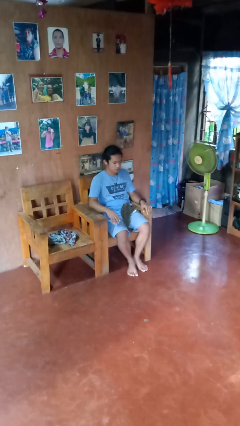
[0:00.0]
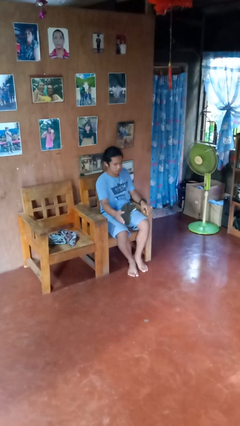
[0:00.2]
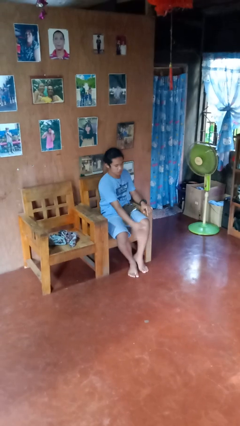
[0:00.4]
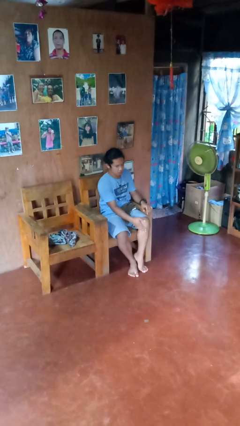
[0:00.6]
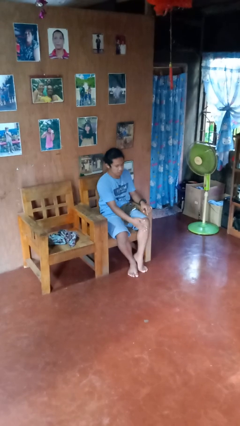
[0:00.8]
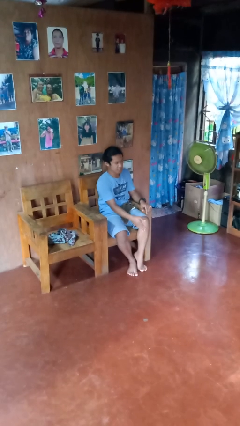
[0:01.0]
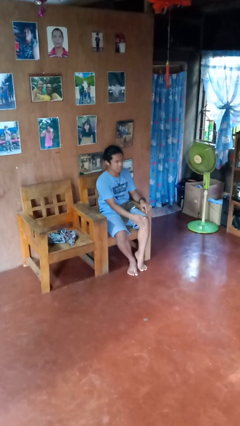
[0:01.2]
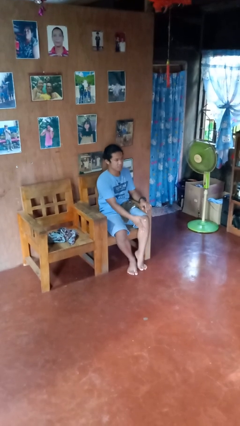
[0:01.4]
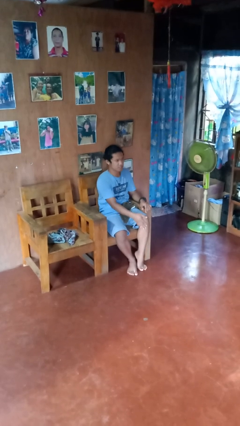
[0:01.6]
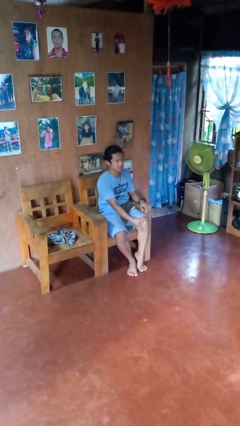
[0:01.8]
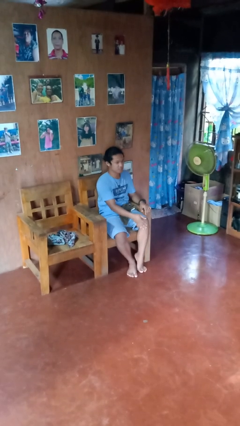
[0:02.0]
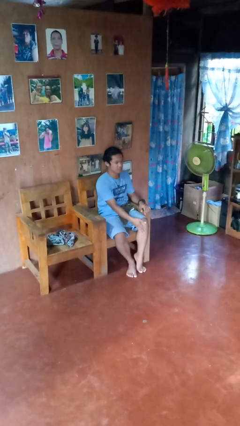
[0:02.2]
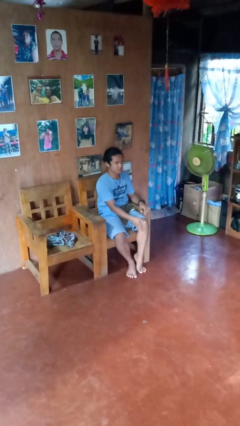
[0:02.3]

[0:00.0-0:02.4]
person swats bug

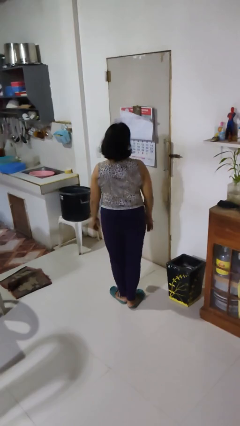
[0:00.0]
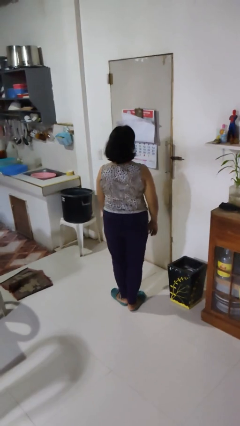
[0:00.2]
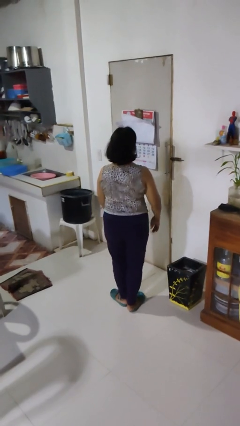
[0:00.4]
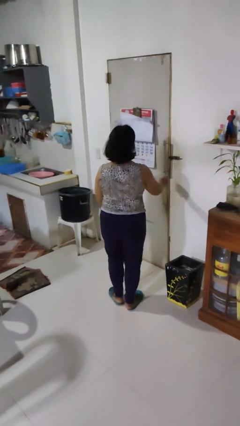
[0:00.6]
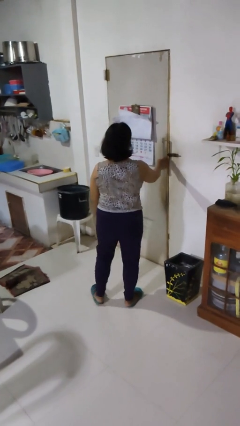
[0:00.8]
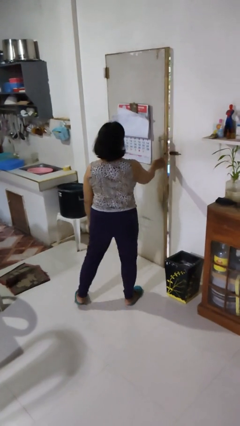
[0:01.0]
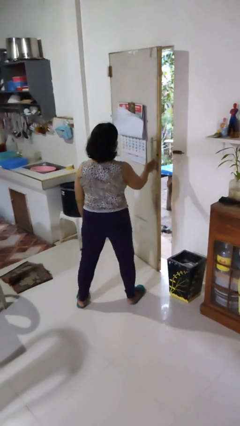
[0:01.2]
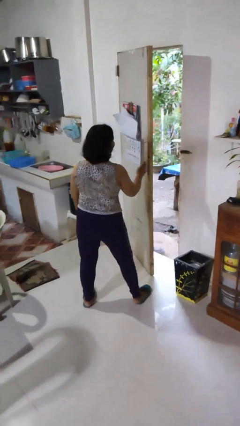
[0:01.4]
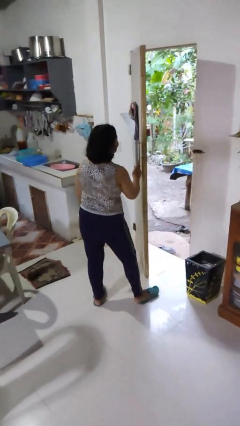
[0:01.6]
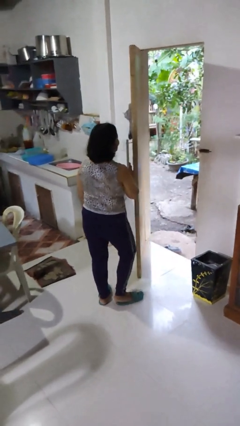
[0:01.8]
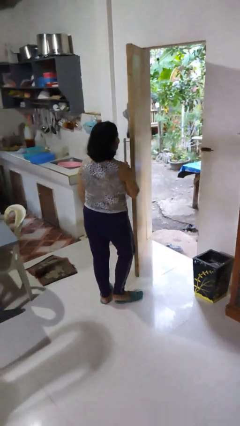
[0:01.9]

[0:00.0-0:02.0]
person opens facility door

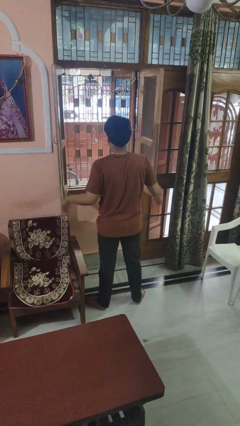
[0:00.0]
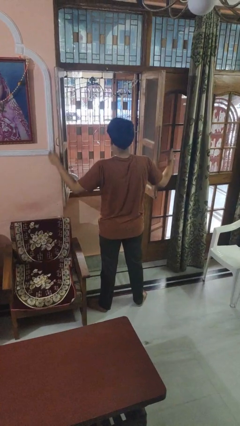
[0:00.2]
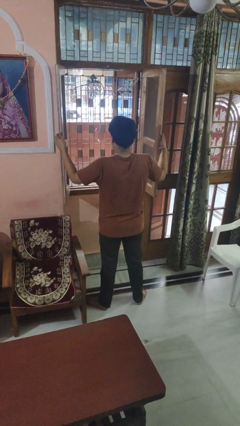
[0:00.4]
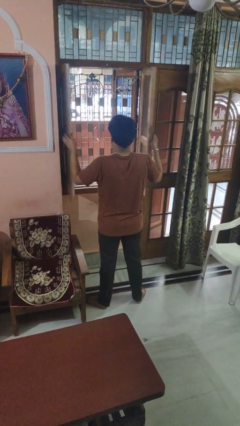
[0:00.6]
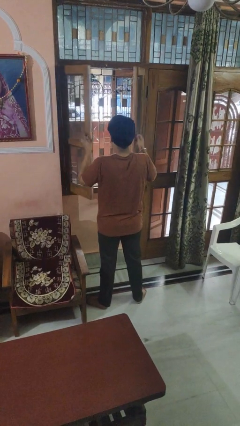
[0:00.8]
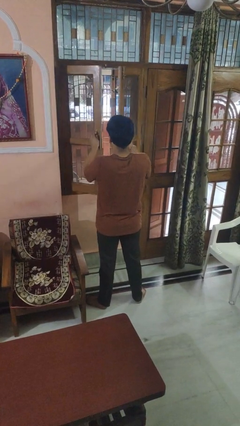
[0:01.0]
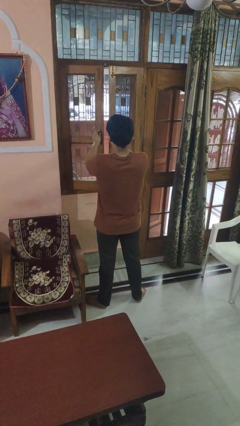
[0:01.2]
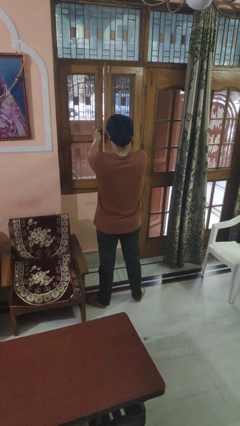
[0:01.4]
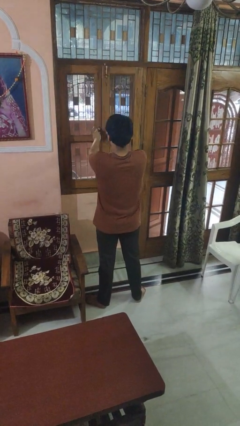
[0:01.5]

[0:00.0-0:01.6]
person closes home window

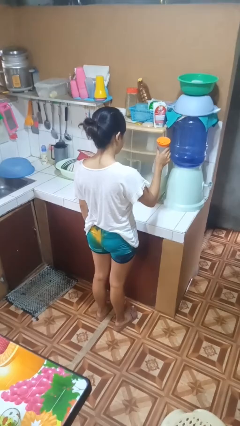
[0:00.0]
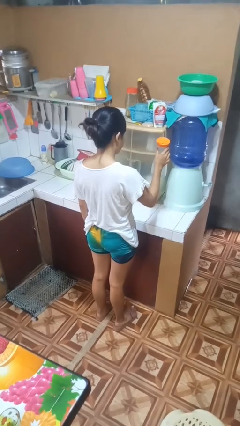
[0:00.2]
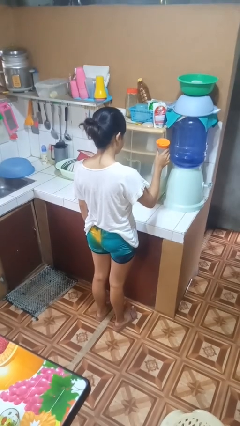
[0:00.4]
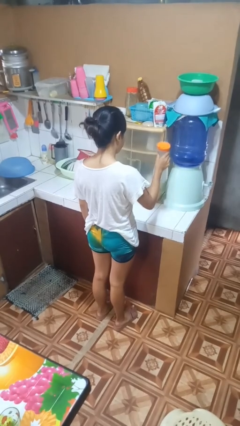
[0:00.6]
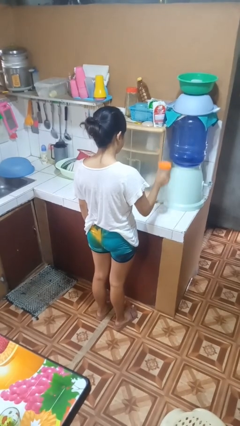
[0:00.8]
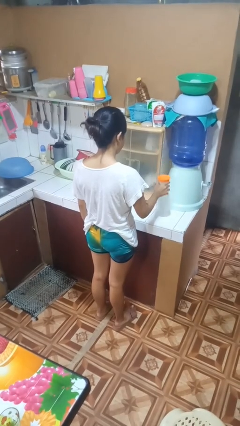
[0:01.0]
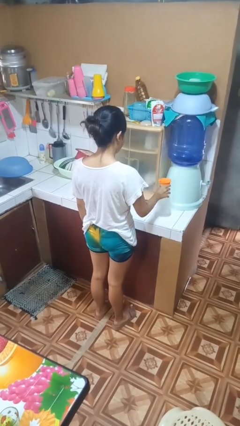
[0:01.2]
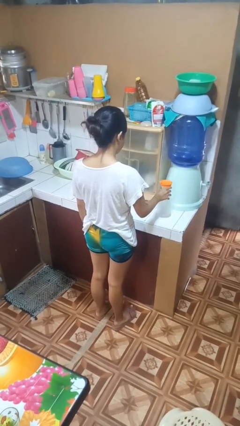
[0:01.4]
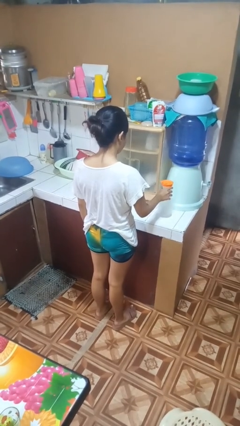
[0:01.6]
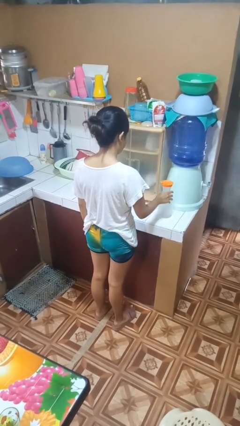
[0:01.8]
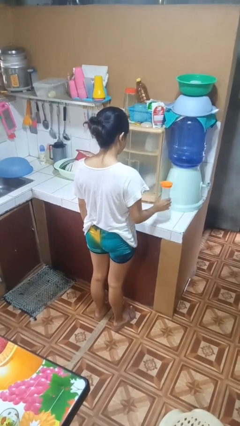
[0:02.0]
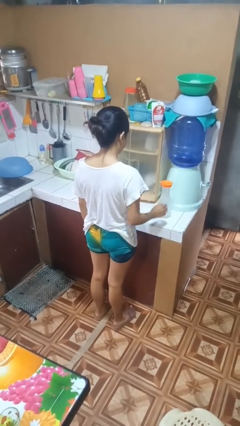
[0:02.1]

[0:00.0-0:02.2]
person puts down object on countertop

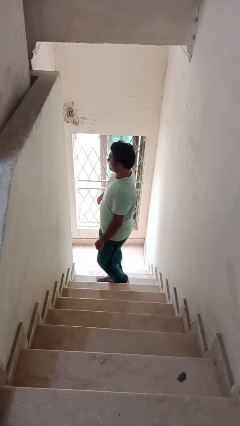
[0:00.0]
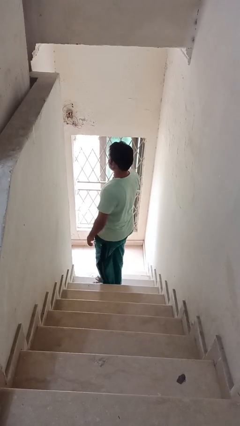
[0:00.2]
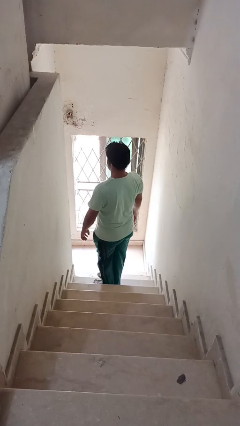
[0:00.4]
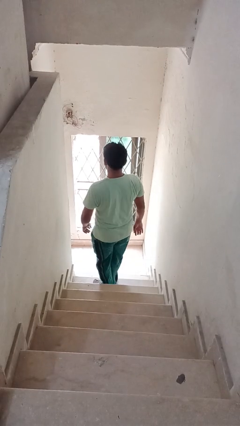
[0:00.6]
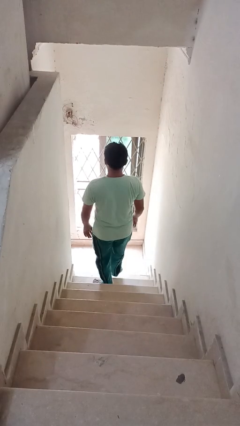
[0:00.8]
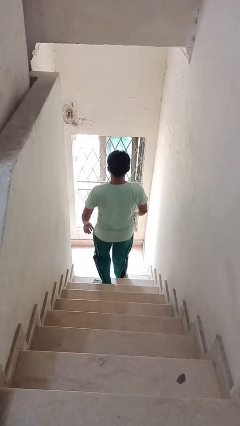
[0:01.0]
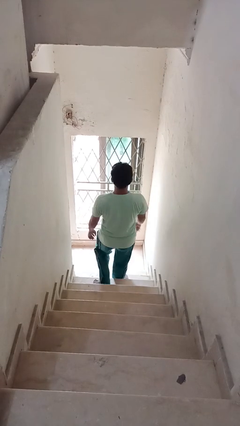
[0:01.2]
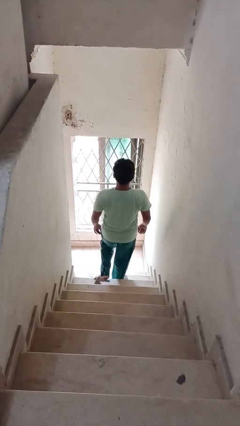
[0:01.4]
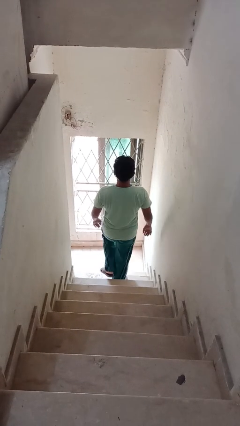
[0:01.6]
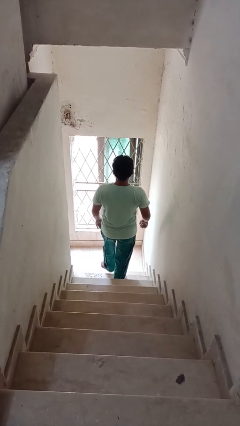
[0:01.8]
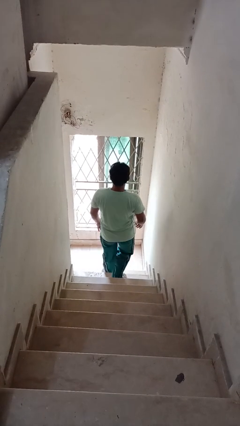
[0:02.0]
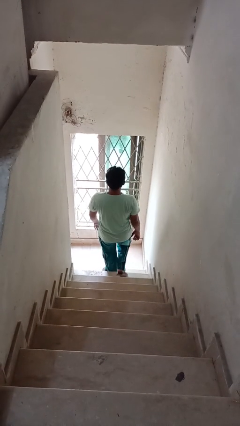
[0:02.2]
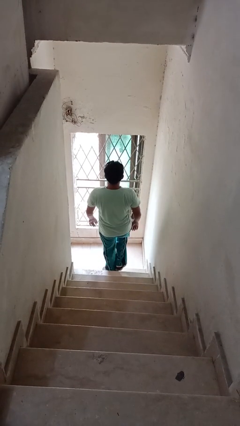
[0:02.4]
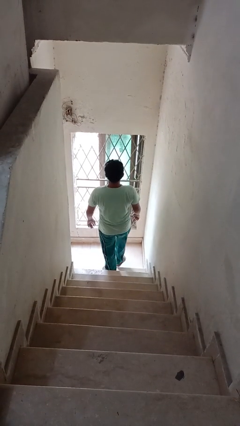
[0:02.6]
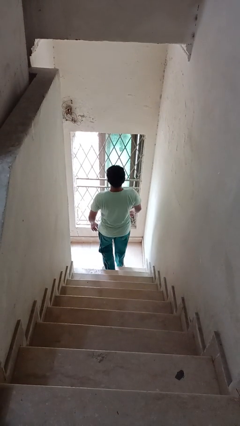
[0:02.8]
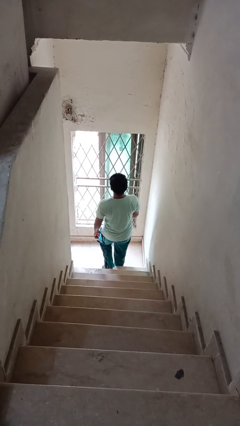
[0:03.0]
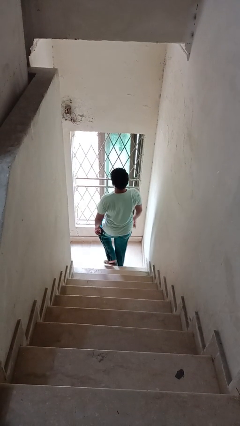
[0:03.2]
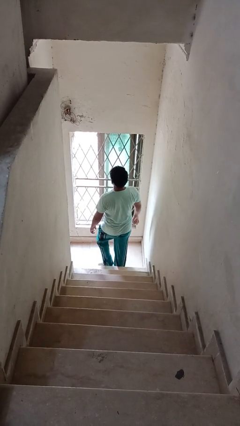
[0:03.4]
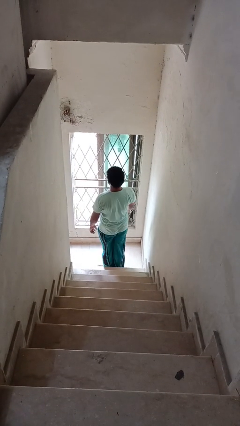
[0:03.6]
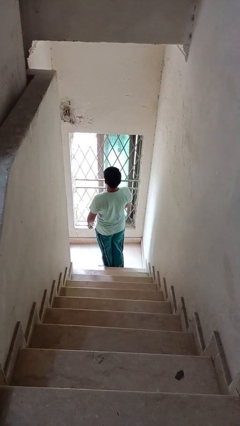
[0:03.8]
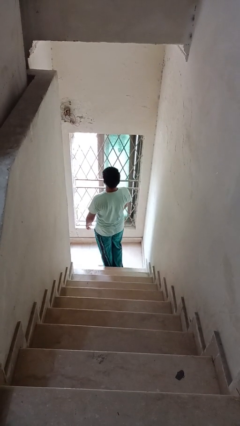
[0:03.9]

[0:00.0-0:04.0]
person climbs down stairs

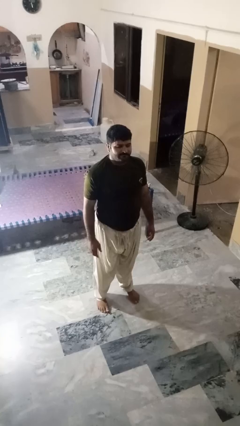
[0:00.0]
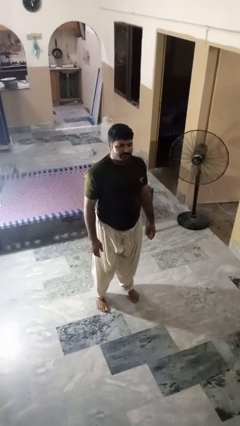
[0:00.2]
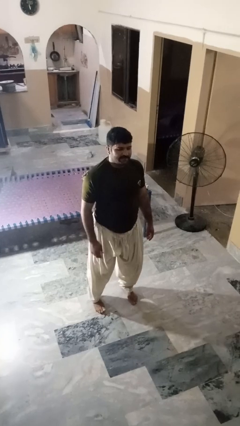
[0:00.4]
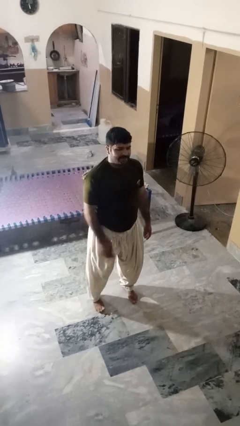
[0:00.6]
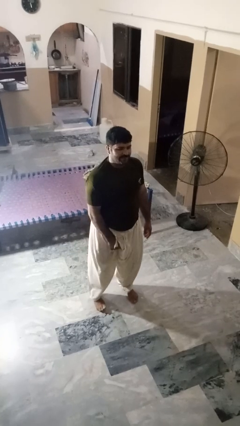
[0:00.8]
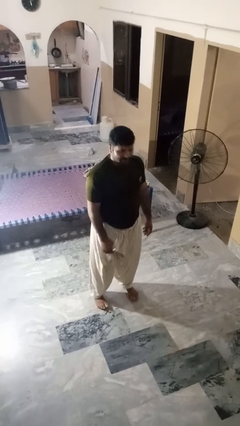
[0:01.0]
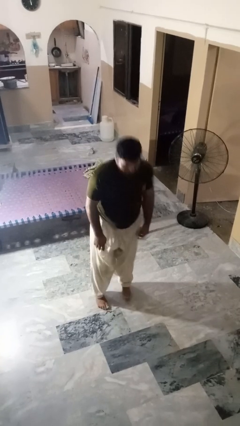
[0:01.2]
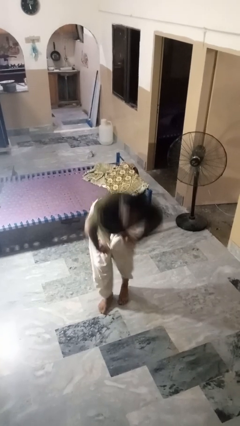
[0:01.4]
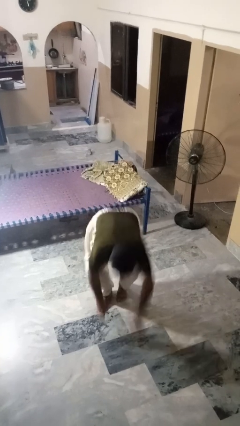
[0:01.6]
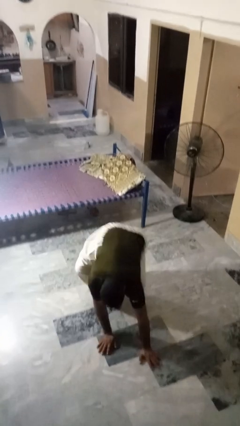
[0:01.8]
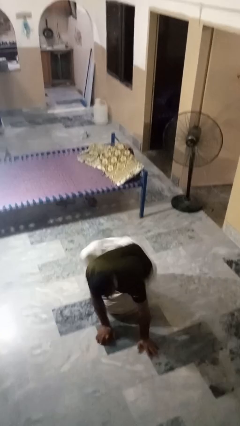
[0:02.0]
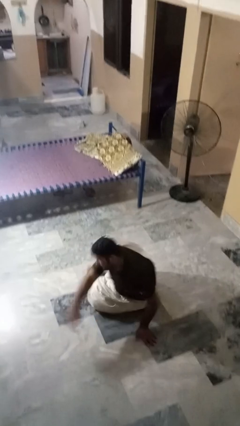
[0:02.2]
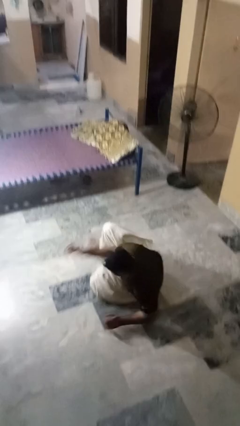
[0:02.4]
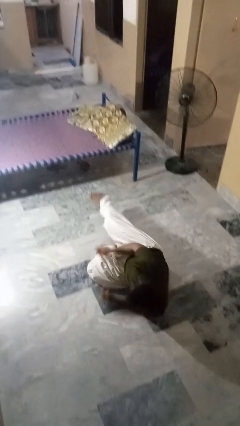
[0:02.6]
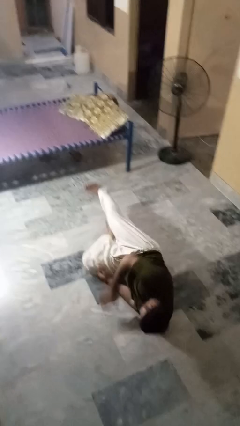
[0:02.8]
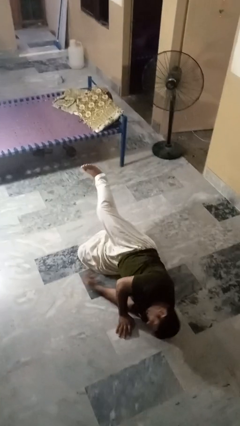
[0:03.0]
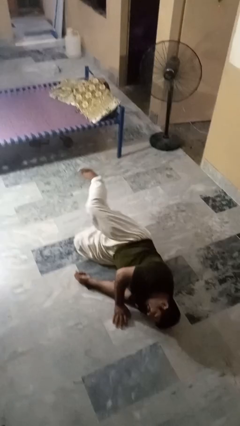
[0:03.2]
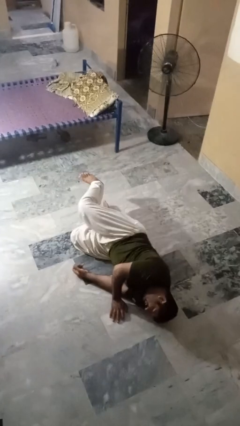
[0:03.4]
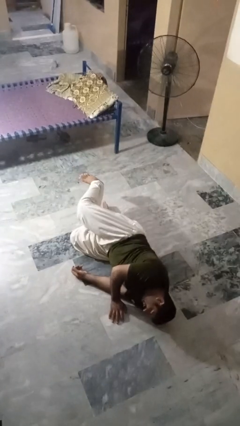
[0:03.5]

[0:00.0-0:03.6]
person falls while standing

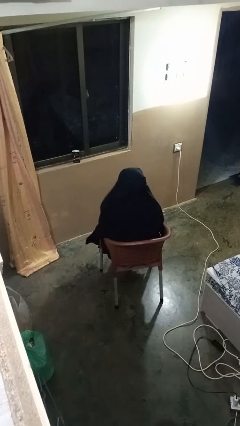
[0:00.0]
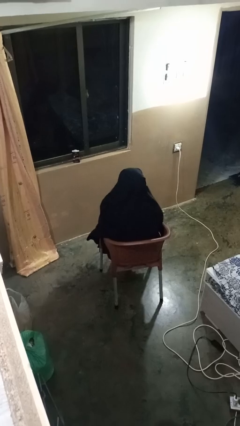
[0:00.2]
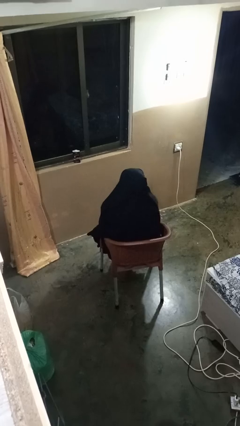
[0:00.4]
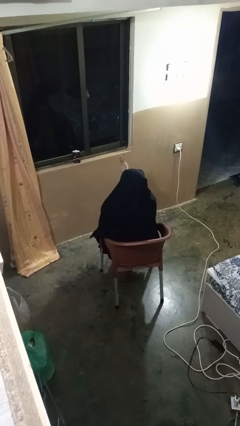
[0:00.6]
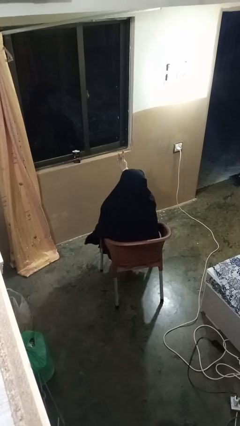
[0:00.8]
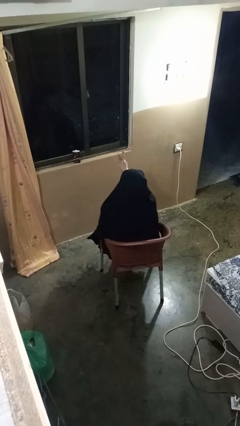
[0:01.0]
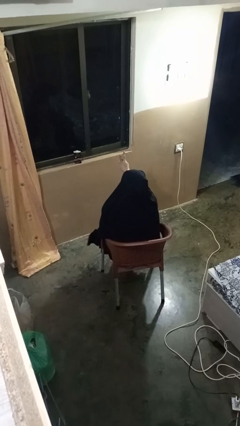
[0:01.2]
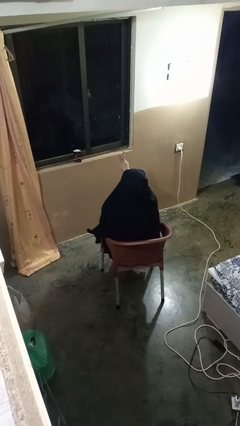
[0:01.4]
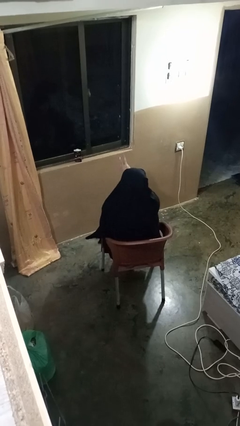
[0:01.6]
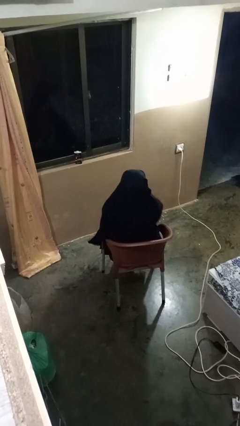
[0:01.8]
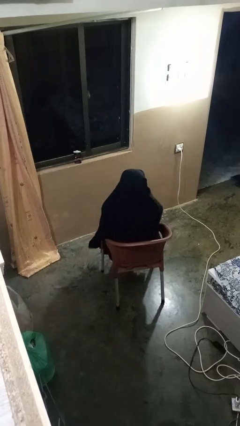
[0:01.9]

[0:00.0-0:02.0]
person gestures peace
